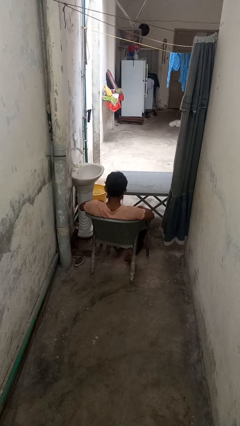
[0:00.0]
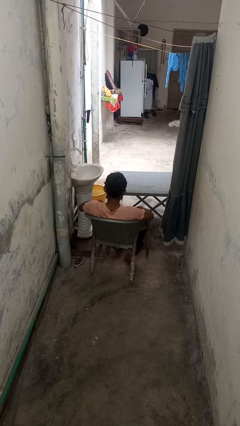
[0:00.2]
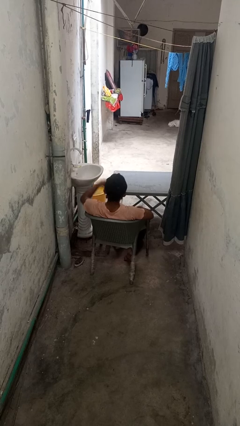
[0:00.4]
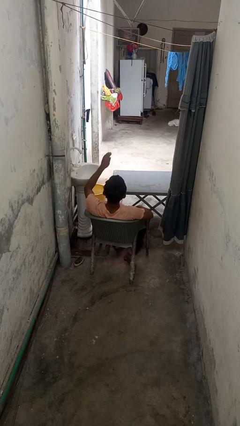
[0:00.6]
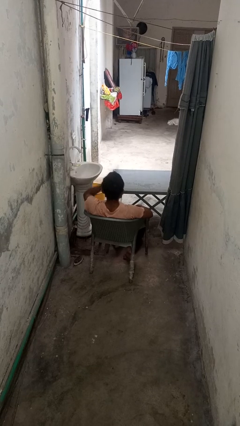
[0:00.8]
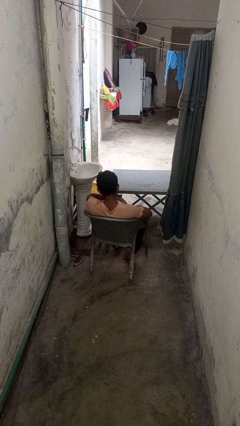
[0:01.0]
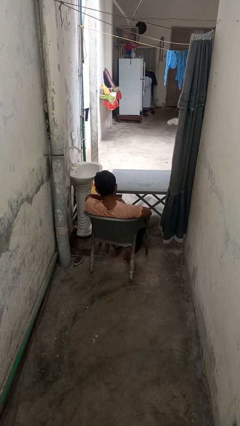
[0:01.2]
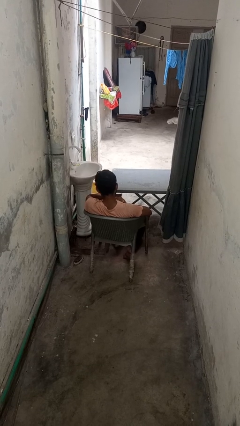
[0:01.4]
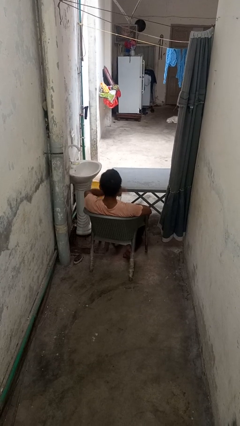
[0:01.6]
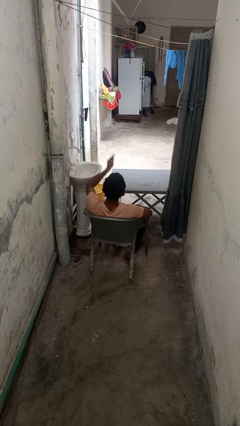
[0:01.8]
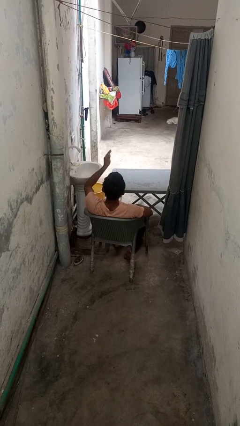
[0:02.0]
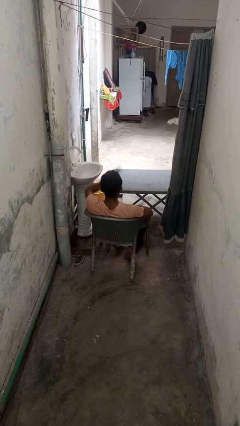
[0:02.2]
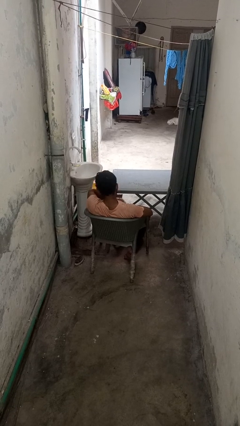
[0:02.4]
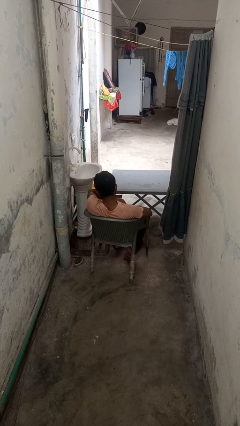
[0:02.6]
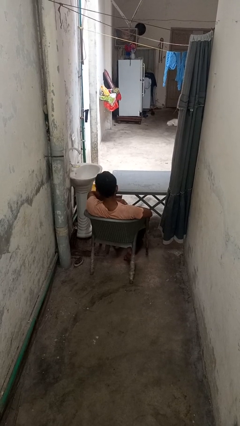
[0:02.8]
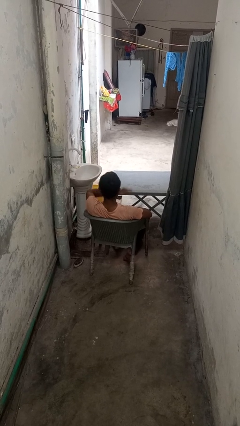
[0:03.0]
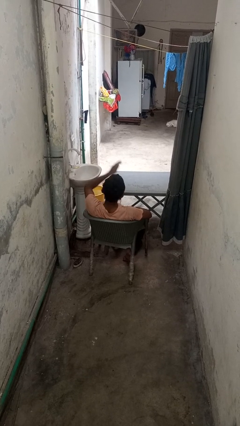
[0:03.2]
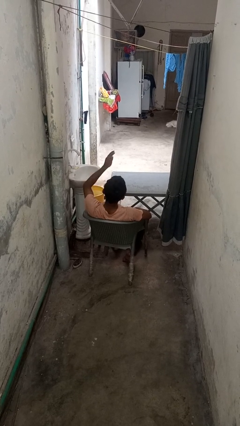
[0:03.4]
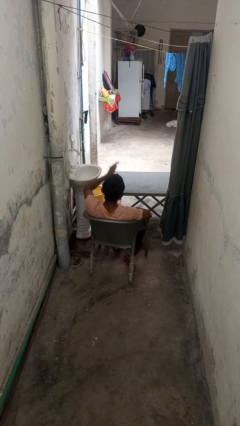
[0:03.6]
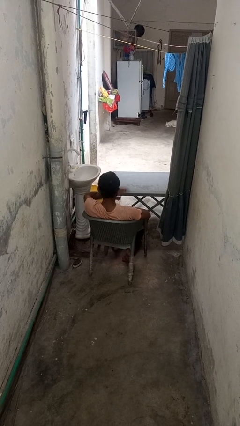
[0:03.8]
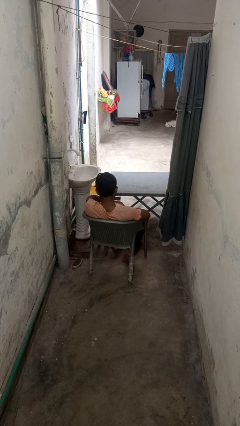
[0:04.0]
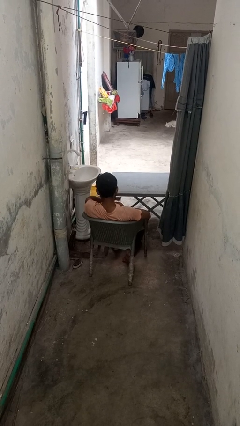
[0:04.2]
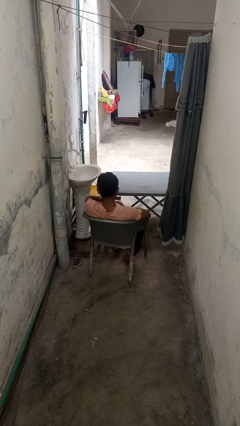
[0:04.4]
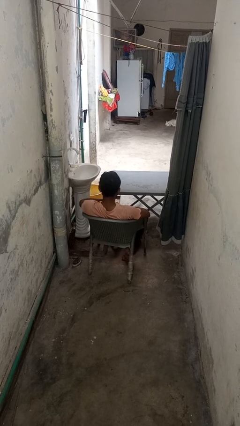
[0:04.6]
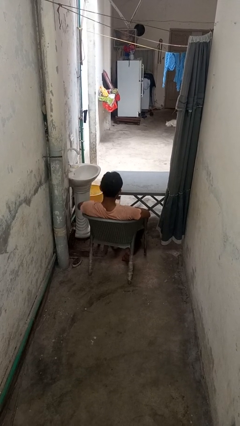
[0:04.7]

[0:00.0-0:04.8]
person drums on chest

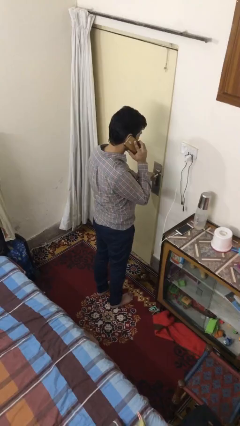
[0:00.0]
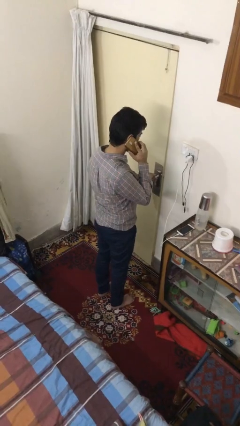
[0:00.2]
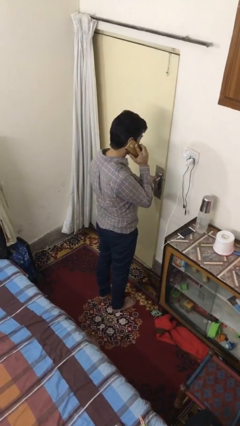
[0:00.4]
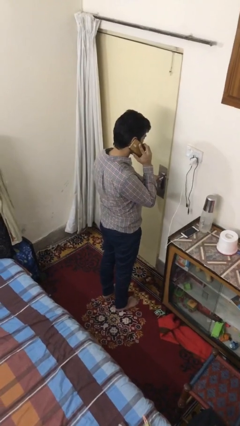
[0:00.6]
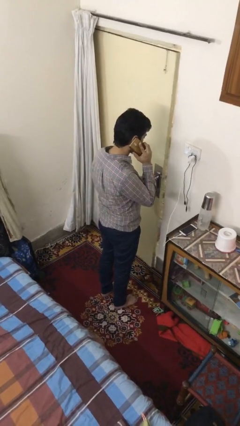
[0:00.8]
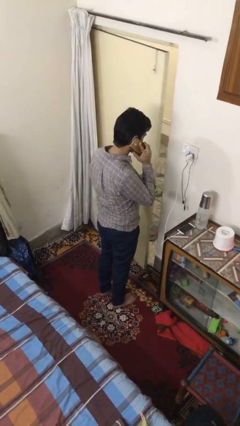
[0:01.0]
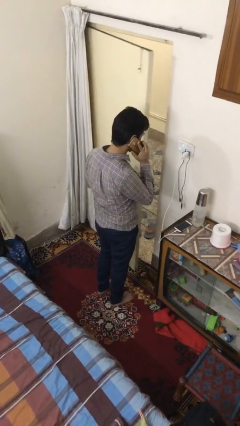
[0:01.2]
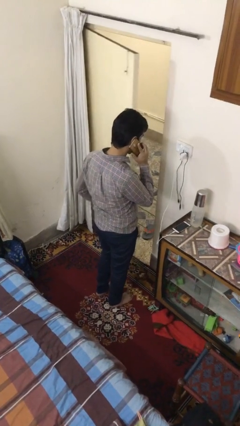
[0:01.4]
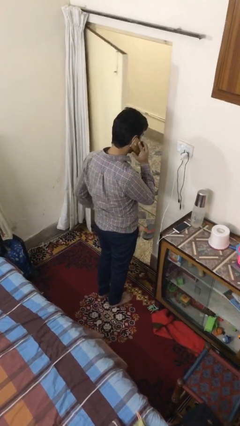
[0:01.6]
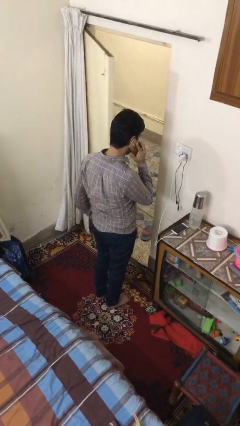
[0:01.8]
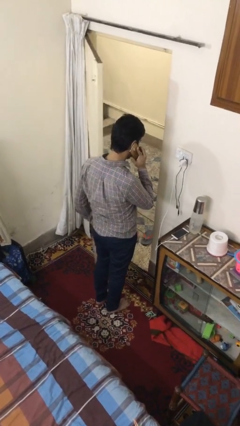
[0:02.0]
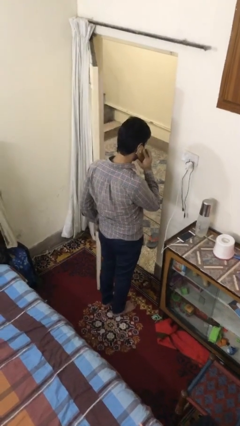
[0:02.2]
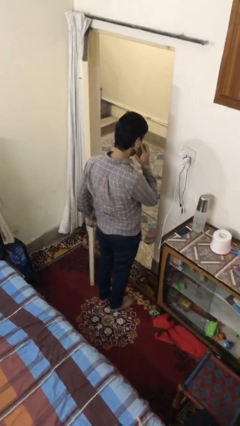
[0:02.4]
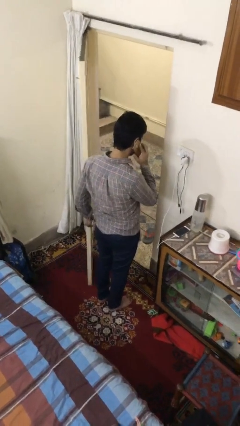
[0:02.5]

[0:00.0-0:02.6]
person opens facility door

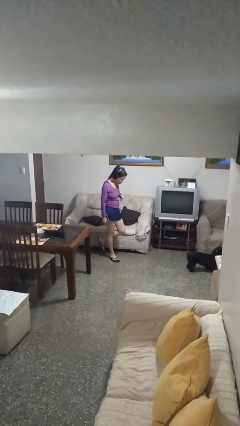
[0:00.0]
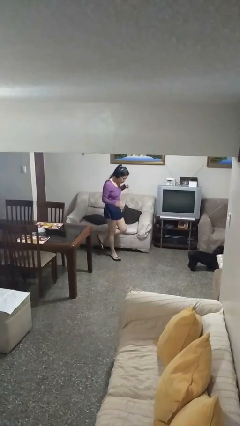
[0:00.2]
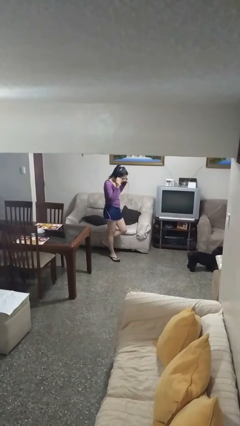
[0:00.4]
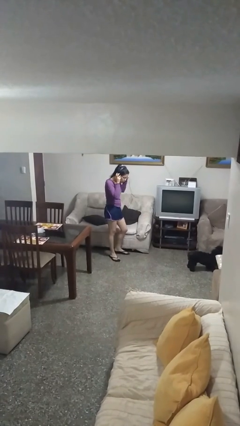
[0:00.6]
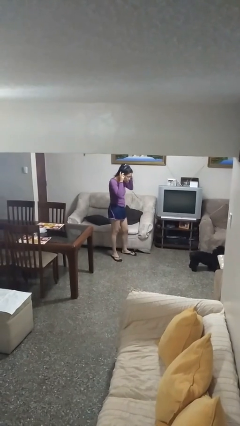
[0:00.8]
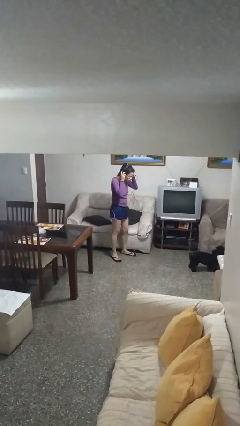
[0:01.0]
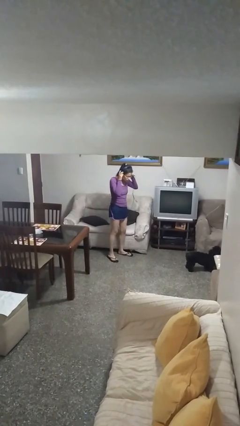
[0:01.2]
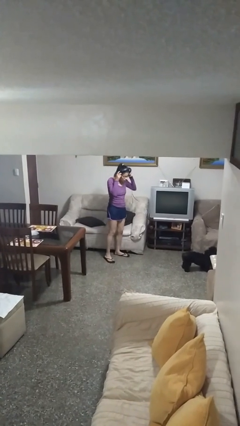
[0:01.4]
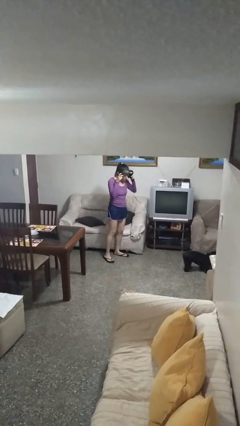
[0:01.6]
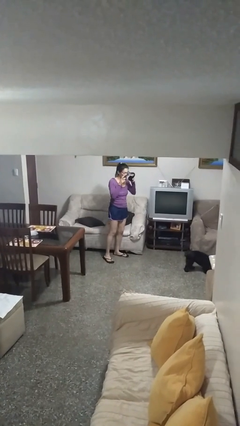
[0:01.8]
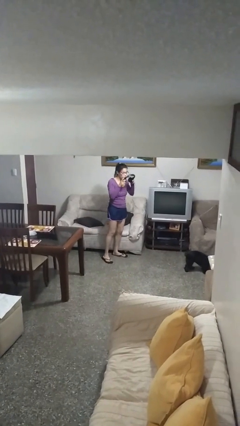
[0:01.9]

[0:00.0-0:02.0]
person takes off headphones

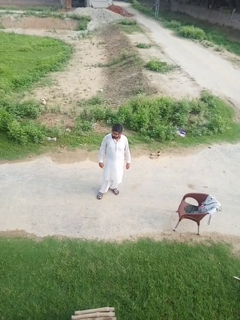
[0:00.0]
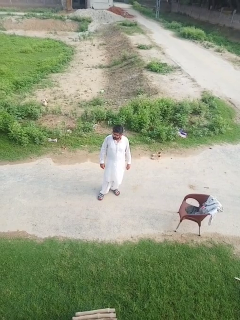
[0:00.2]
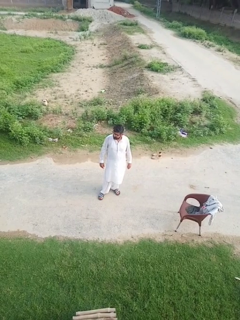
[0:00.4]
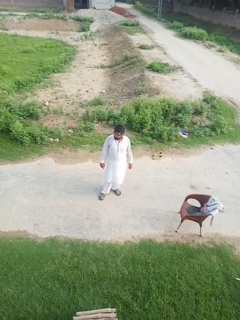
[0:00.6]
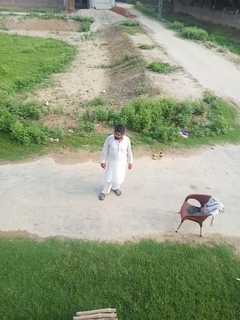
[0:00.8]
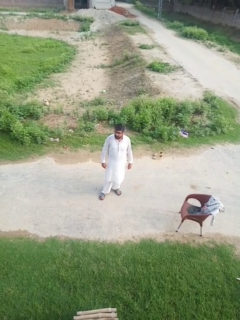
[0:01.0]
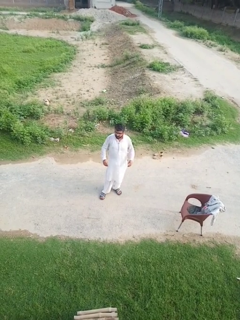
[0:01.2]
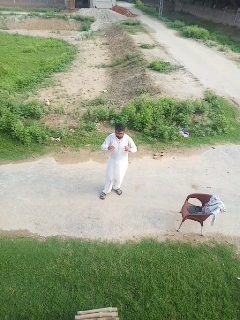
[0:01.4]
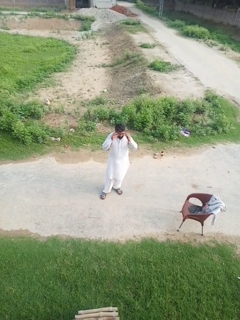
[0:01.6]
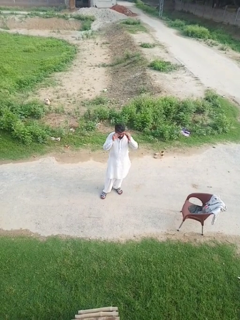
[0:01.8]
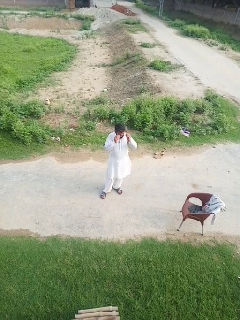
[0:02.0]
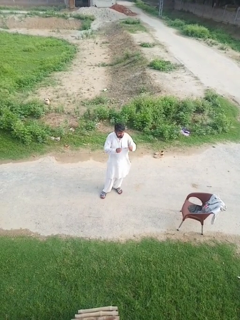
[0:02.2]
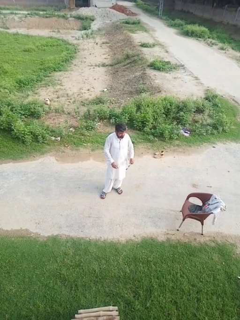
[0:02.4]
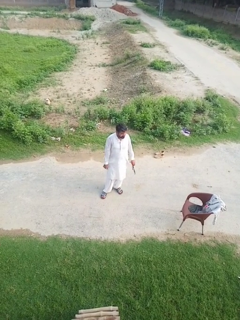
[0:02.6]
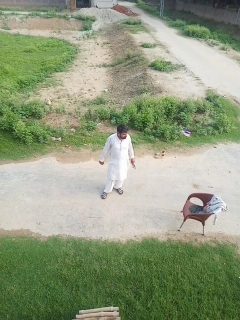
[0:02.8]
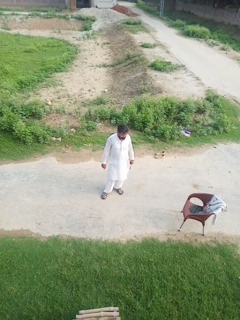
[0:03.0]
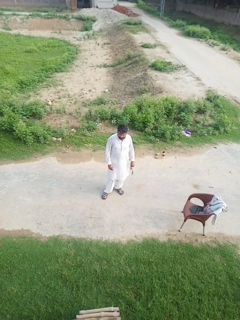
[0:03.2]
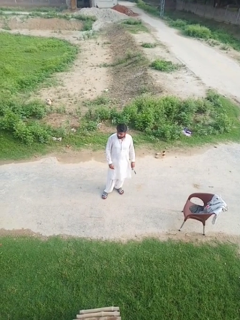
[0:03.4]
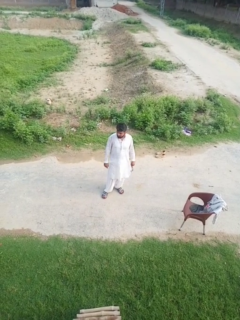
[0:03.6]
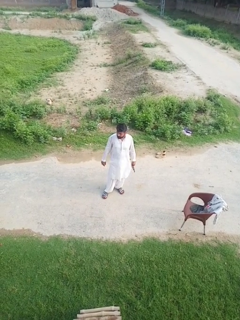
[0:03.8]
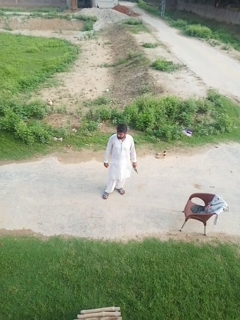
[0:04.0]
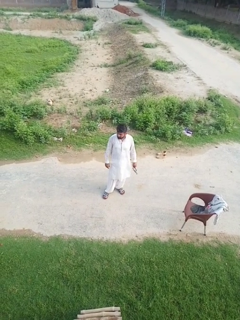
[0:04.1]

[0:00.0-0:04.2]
person takes off glasses

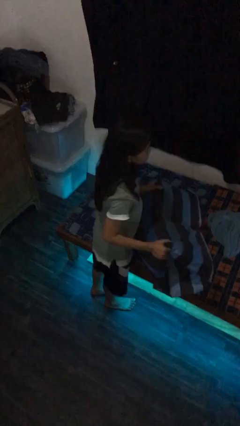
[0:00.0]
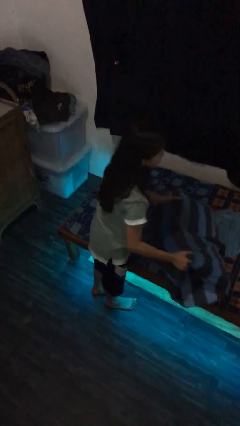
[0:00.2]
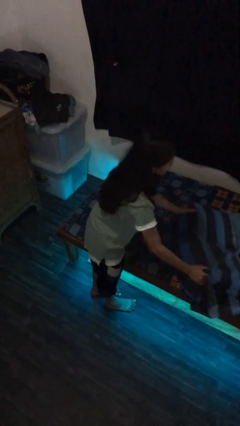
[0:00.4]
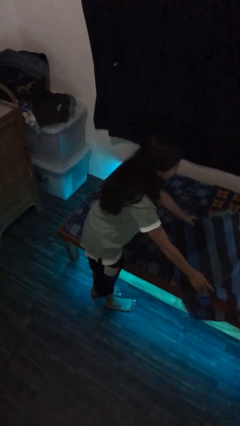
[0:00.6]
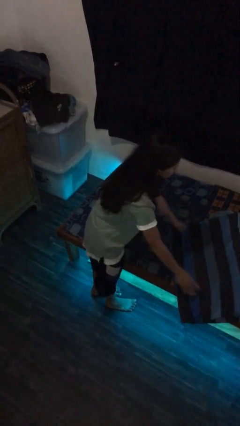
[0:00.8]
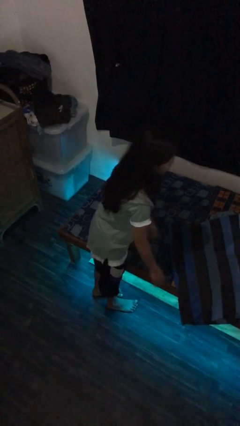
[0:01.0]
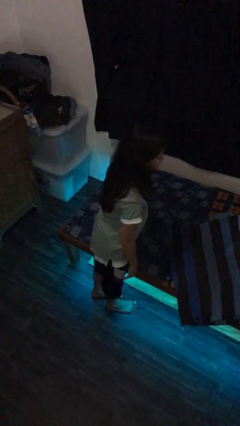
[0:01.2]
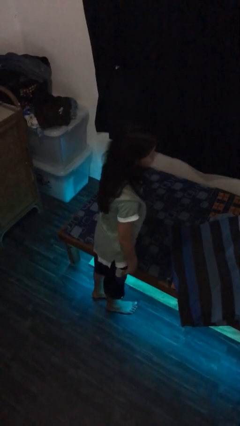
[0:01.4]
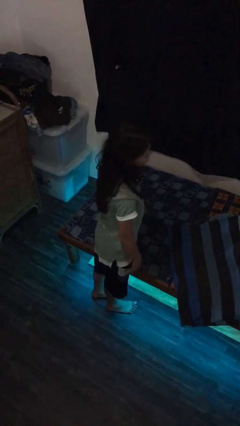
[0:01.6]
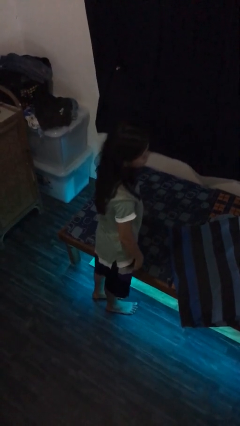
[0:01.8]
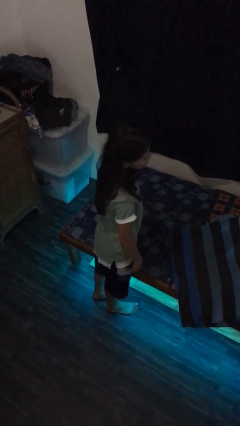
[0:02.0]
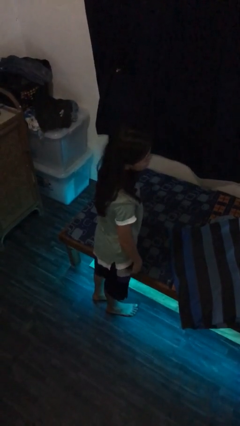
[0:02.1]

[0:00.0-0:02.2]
person puts down object on bed

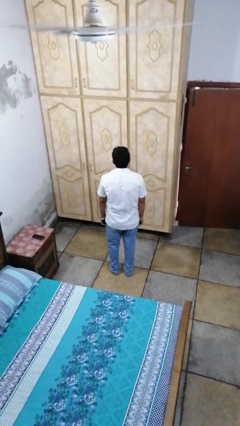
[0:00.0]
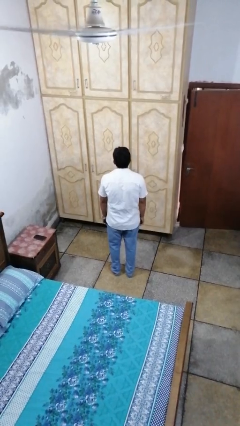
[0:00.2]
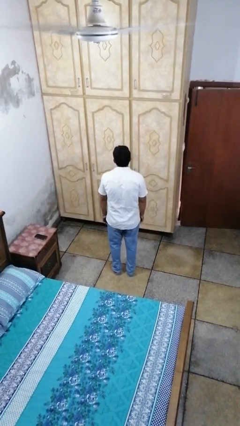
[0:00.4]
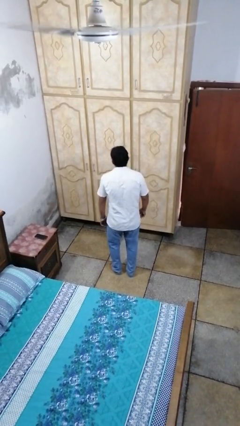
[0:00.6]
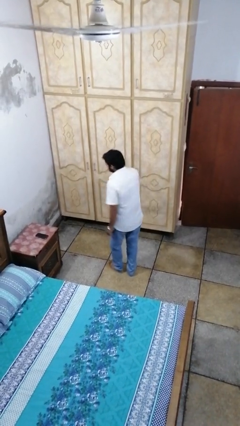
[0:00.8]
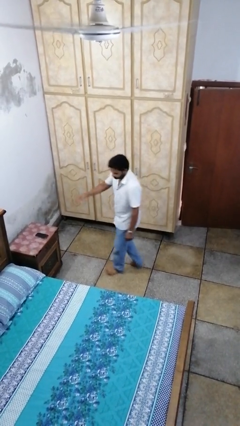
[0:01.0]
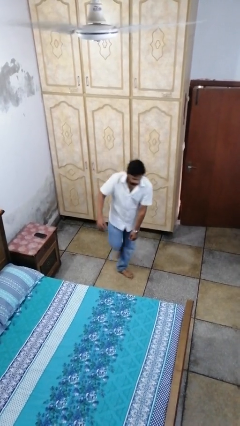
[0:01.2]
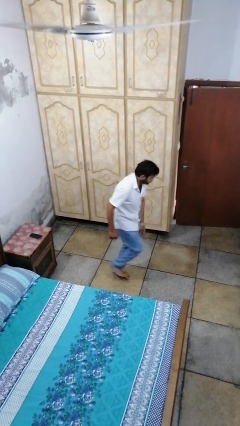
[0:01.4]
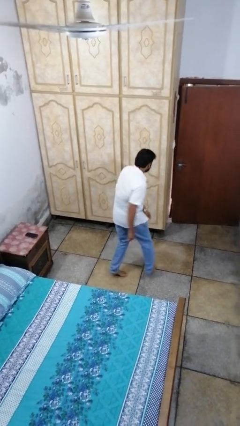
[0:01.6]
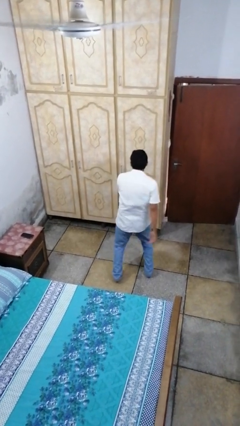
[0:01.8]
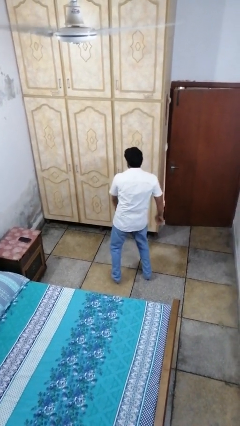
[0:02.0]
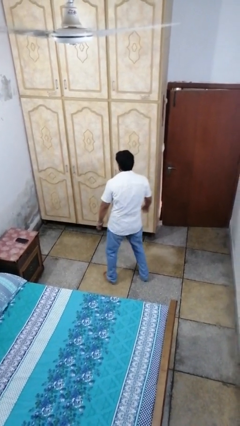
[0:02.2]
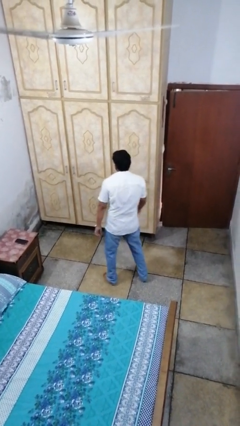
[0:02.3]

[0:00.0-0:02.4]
person twirls

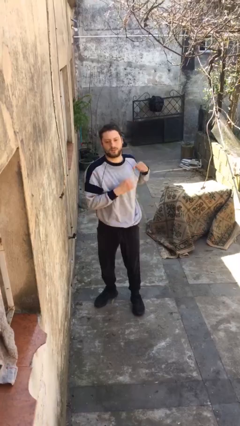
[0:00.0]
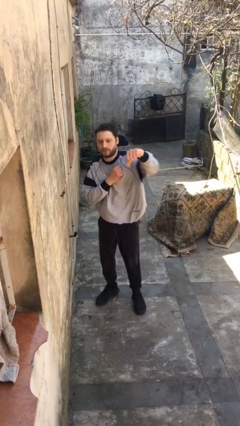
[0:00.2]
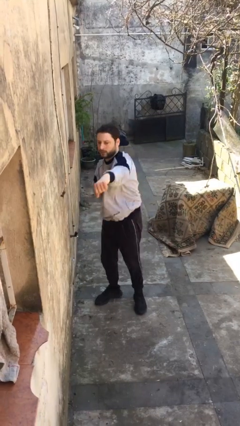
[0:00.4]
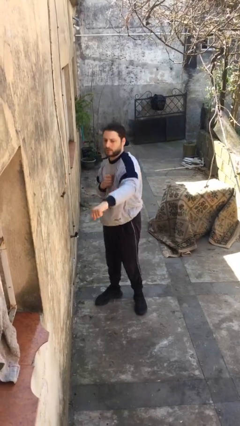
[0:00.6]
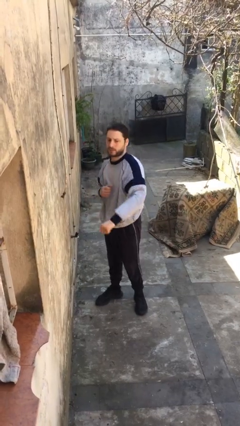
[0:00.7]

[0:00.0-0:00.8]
person punches
